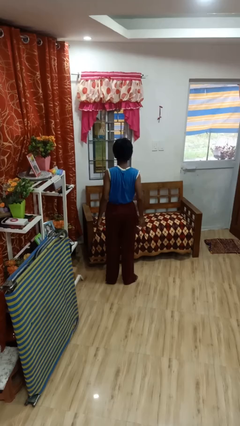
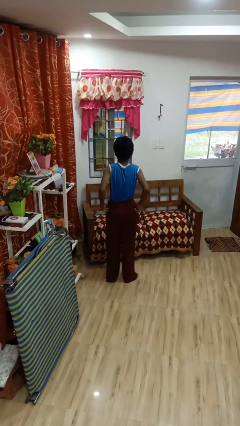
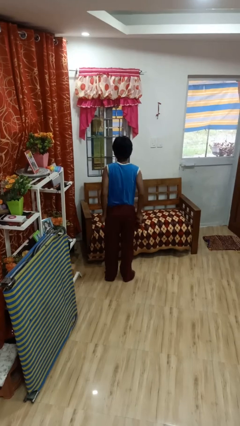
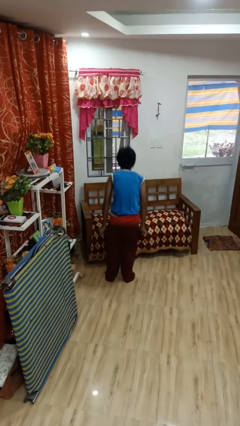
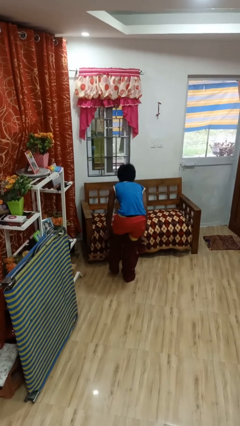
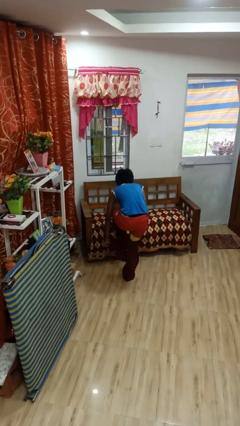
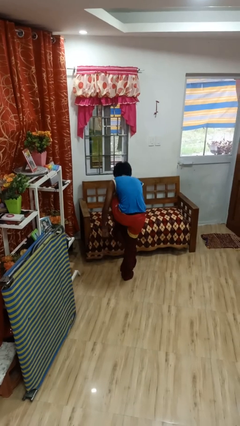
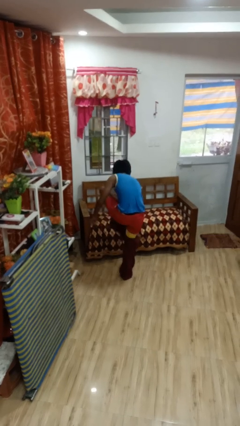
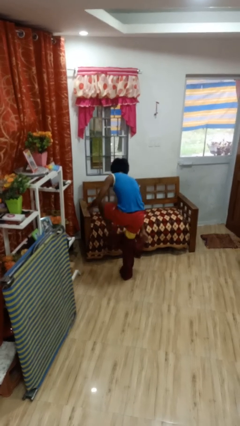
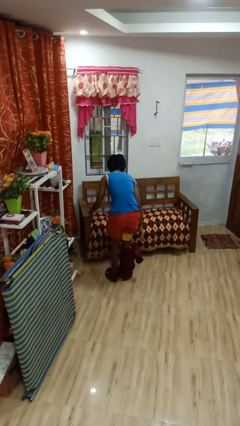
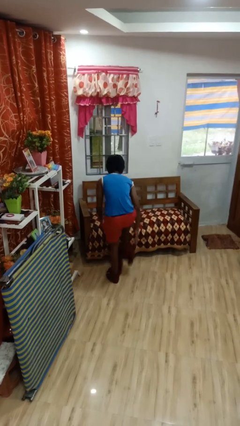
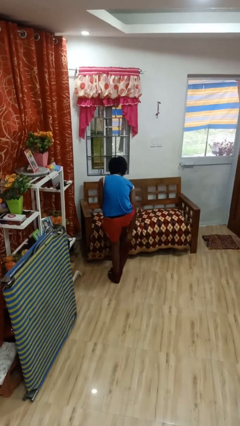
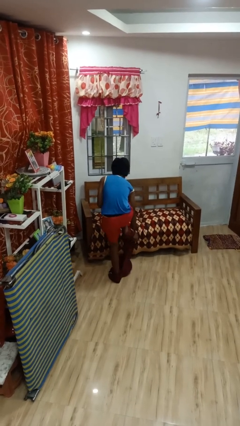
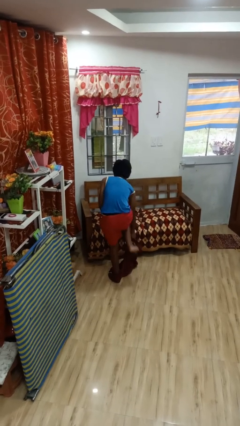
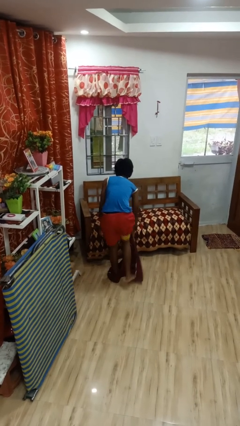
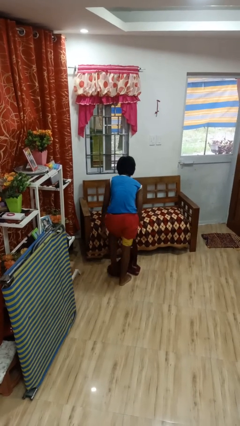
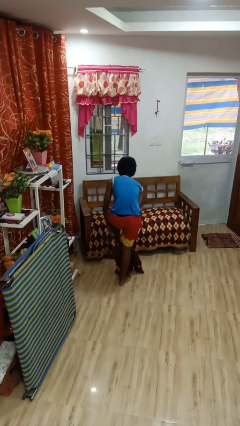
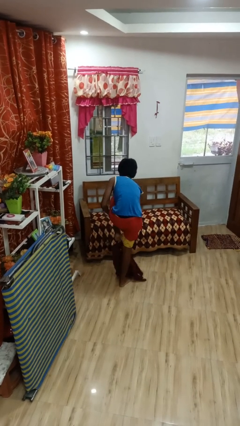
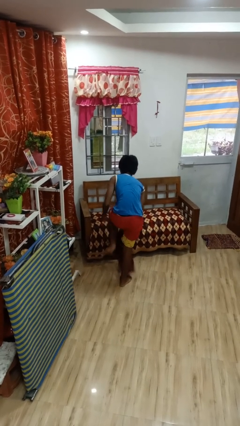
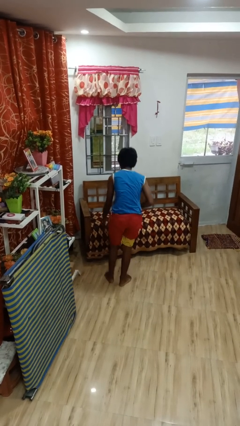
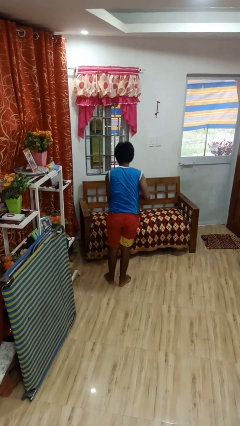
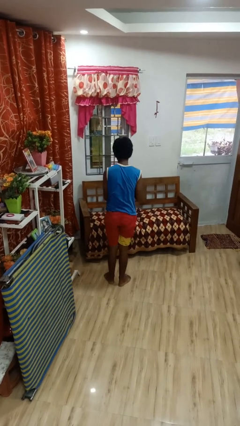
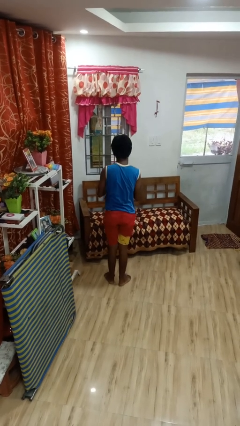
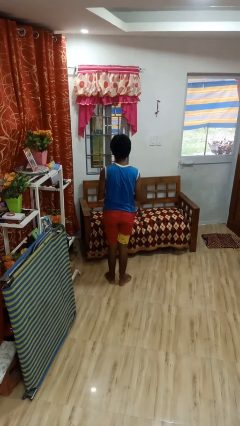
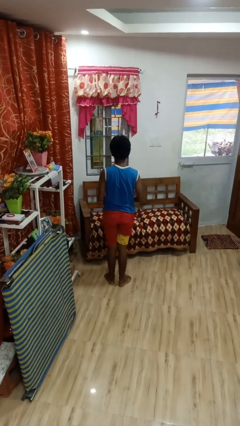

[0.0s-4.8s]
person takes off pants

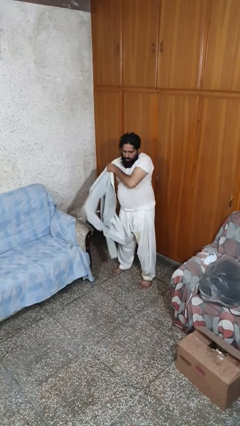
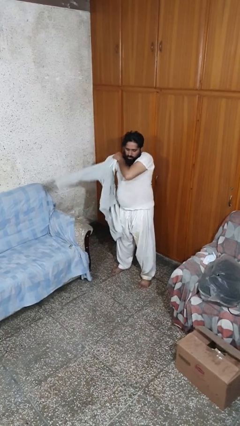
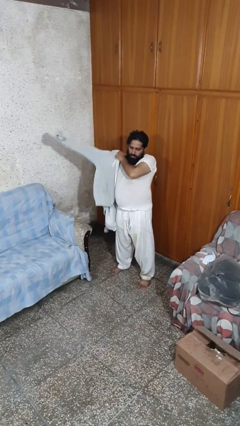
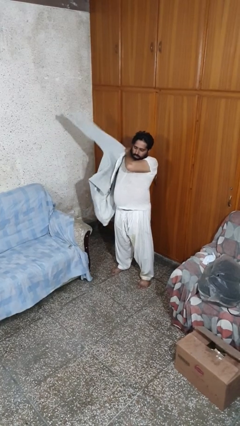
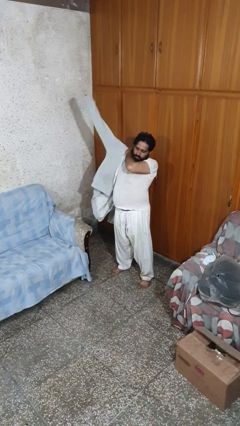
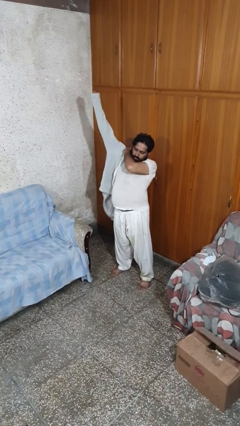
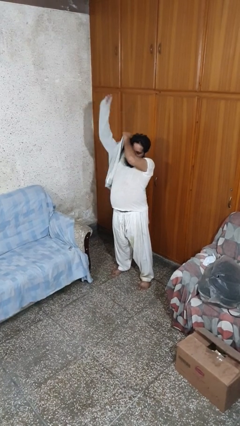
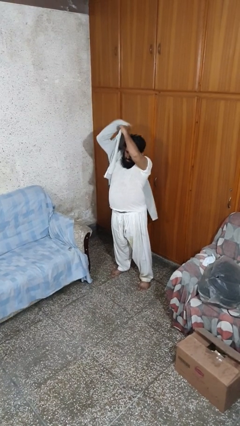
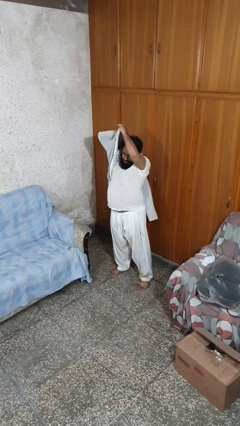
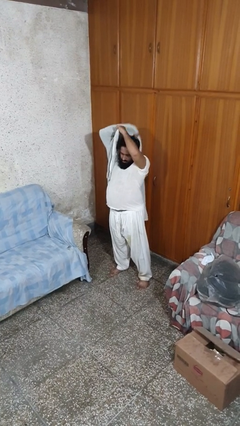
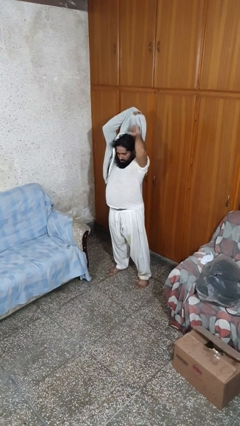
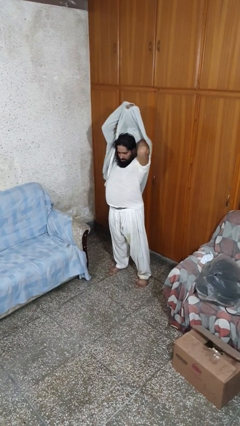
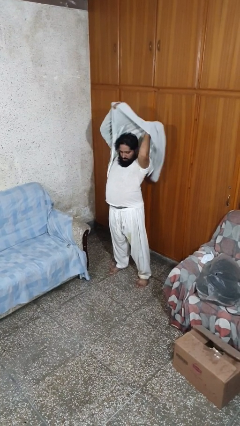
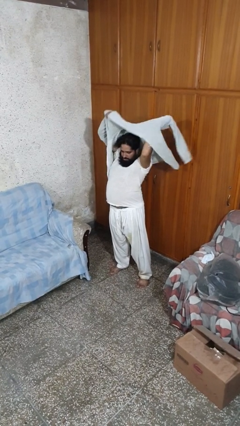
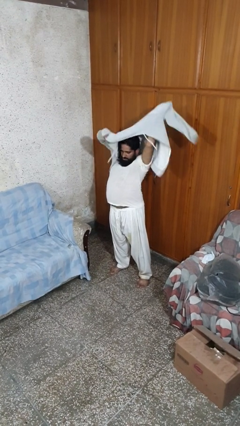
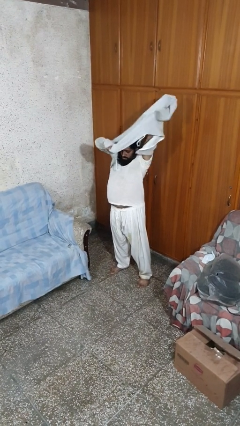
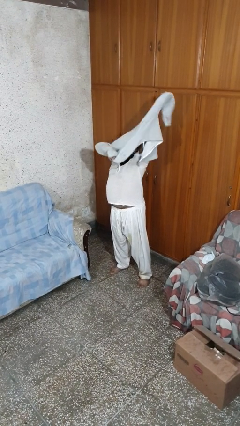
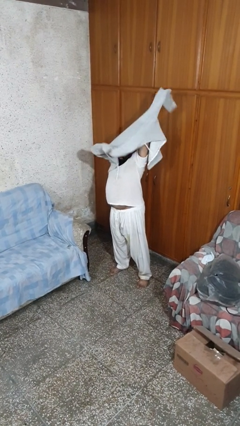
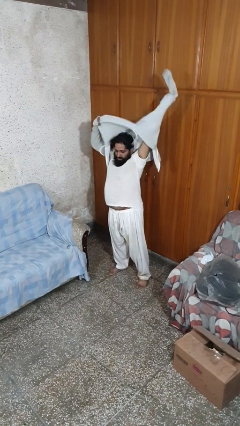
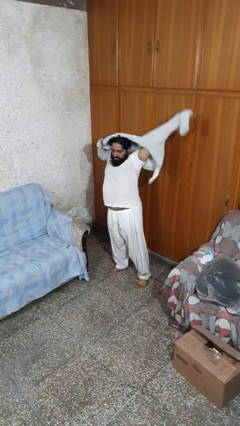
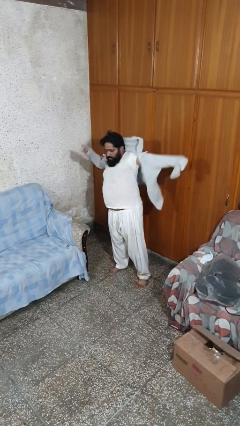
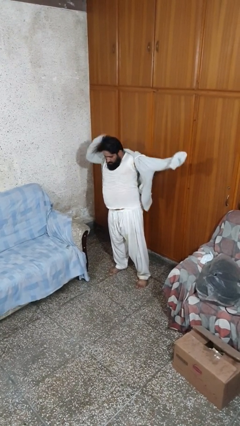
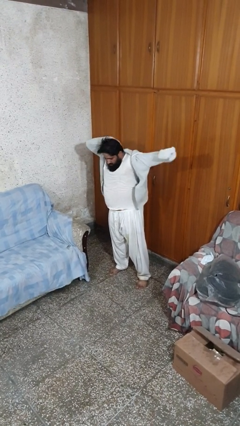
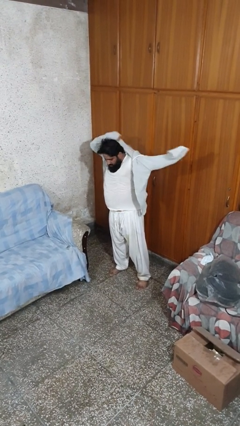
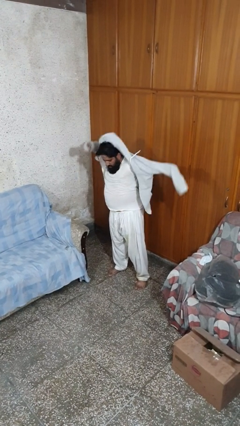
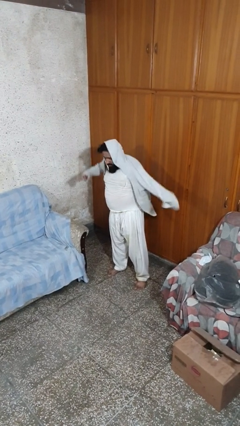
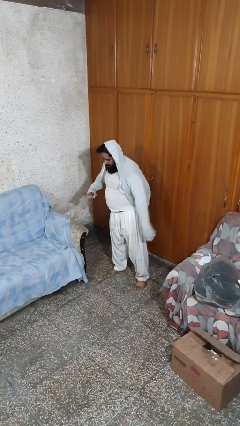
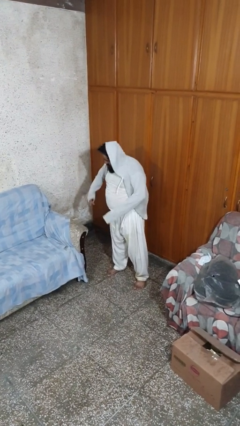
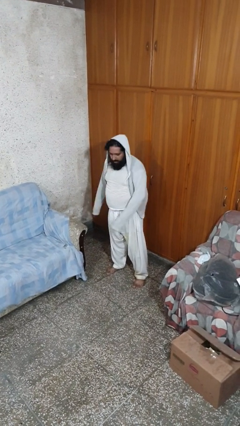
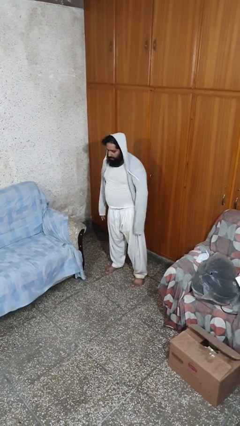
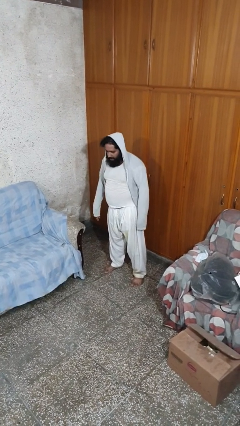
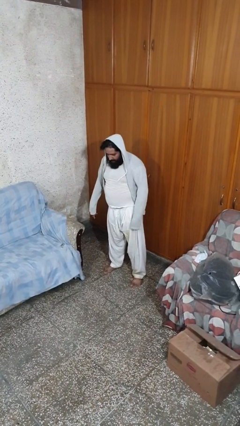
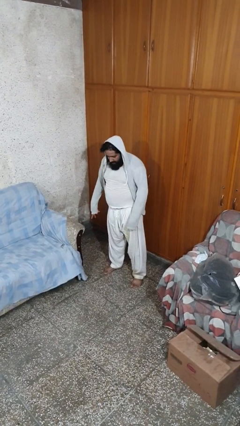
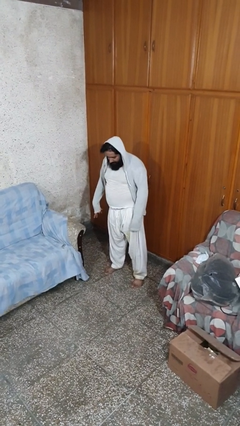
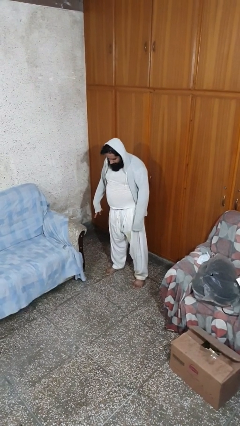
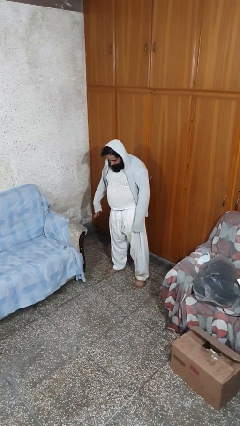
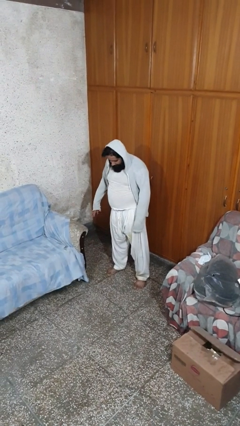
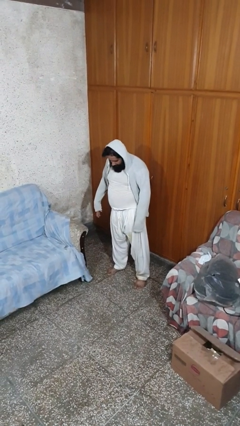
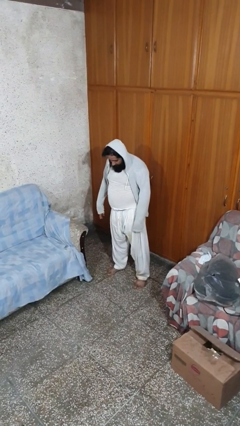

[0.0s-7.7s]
person puts on hoodie

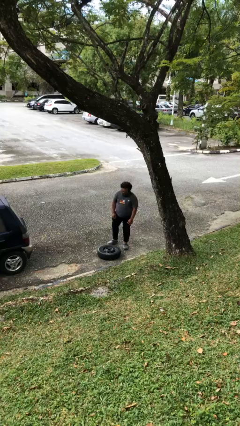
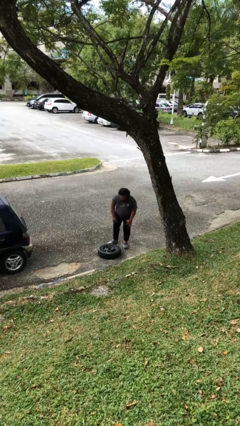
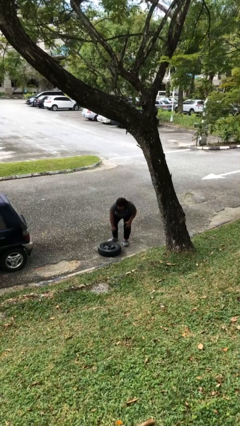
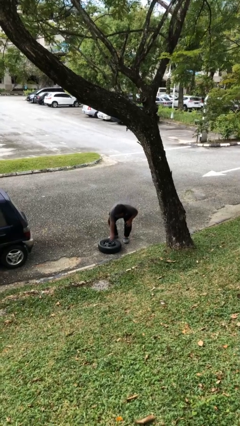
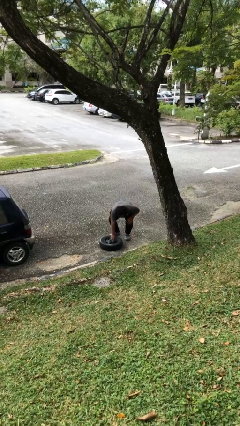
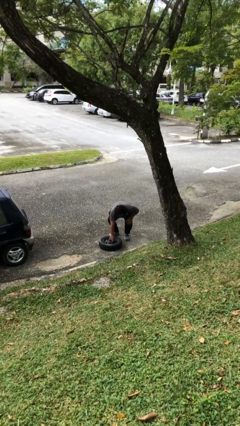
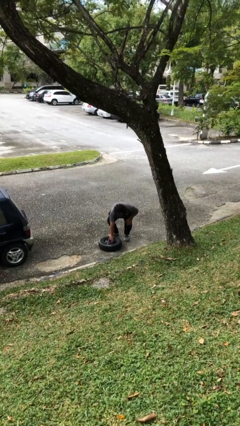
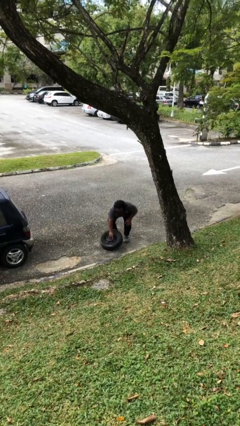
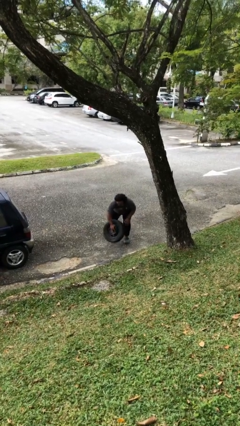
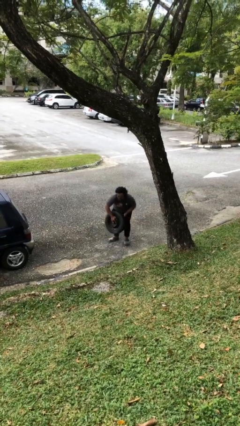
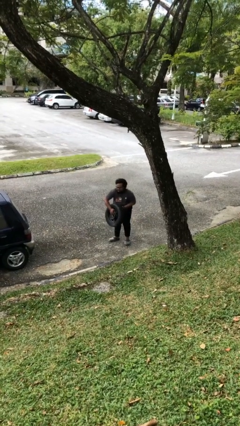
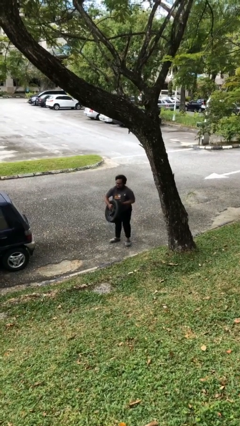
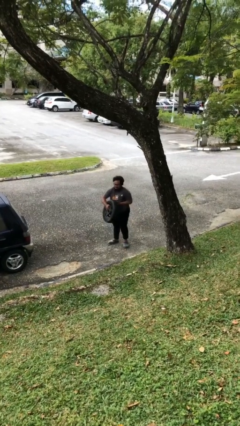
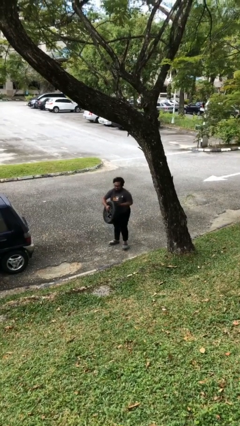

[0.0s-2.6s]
person picks up object from floor

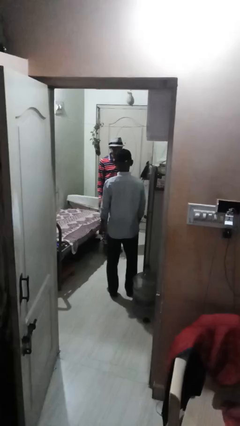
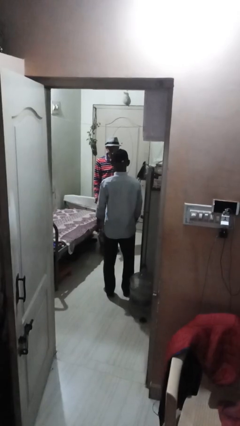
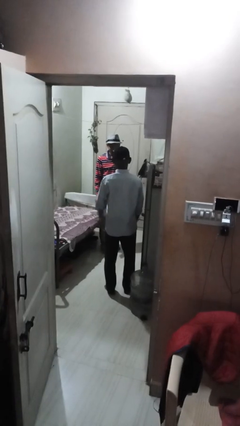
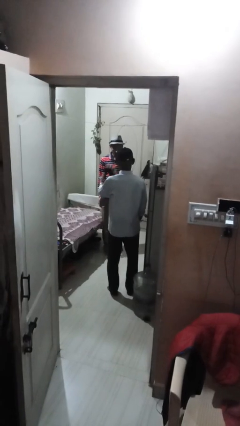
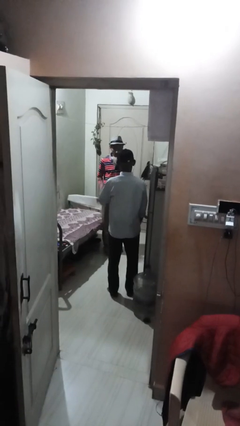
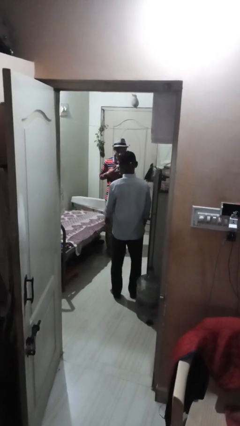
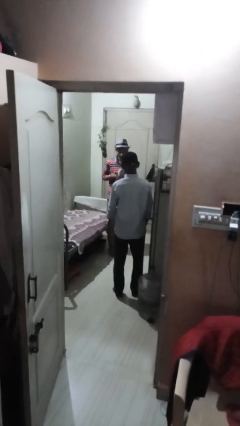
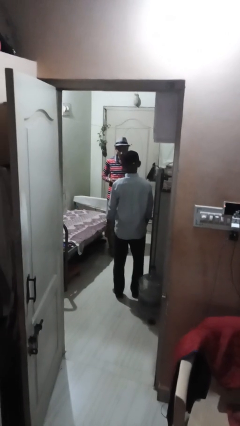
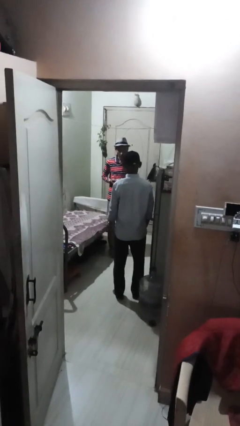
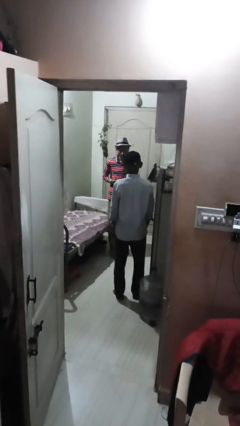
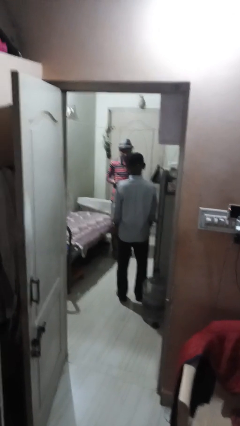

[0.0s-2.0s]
person throws object to person

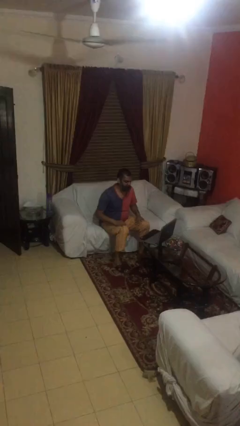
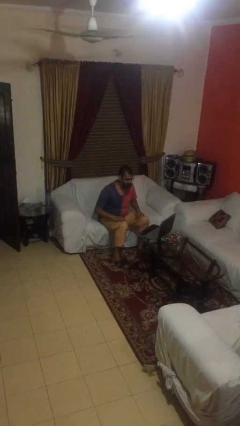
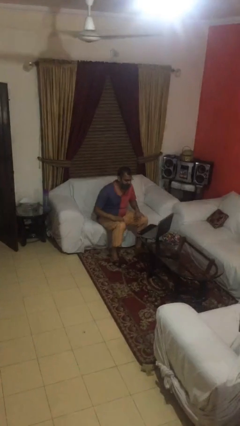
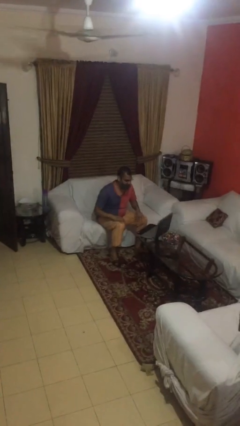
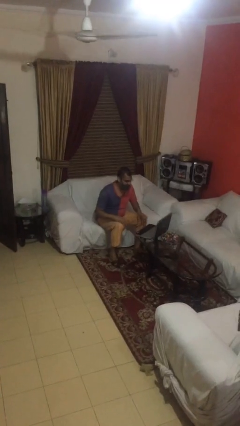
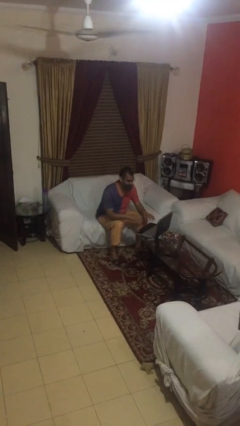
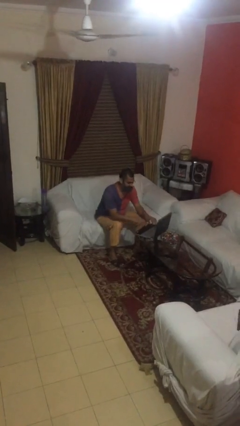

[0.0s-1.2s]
person interacts with laptop
